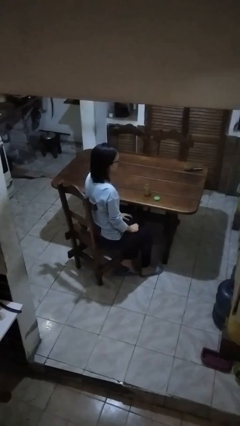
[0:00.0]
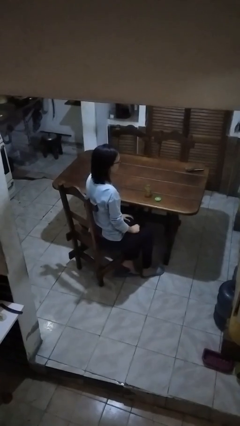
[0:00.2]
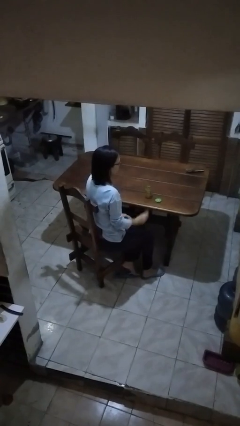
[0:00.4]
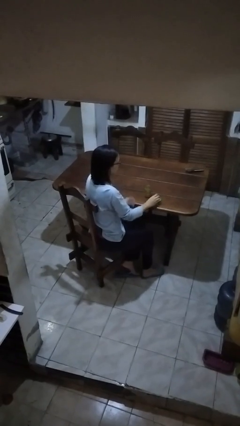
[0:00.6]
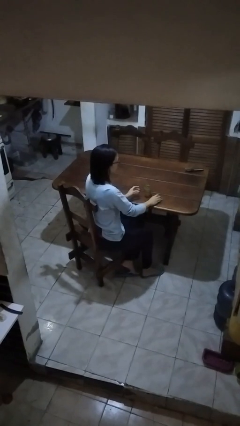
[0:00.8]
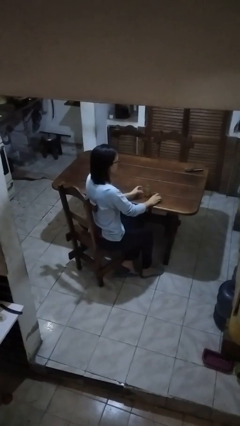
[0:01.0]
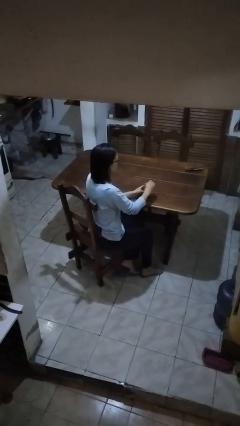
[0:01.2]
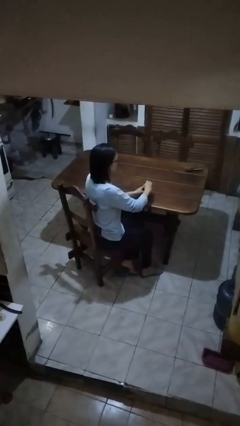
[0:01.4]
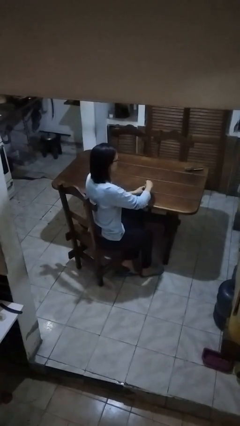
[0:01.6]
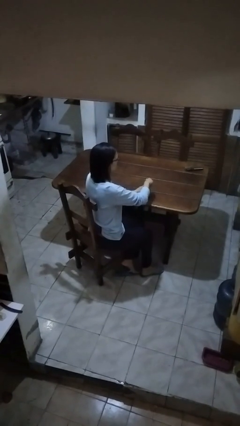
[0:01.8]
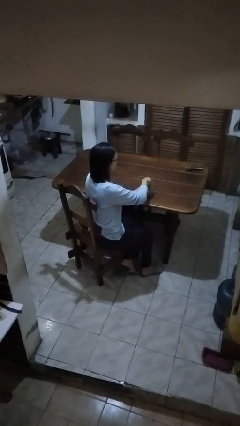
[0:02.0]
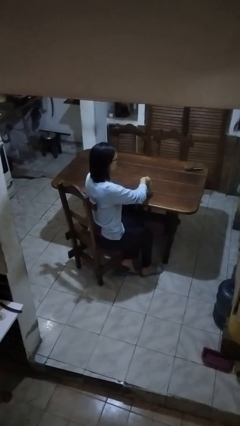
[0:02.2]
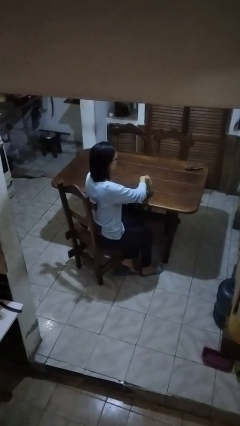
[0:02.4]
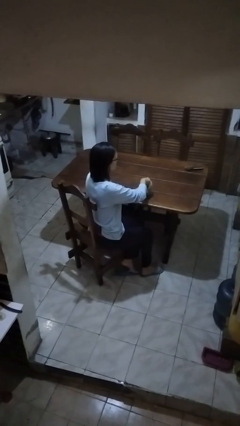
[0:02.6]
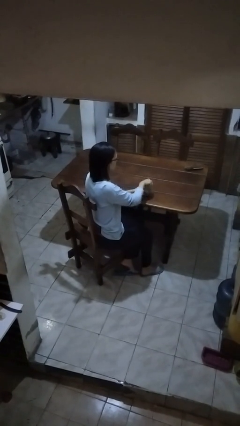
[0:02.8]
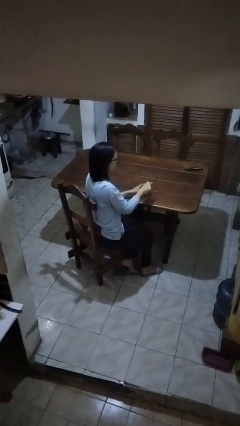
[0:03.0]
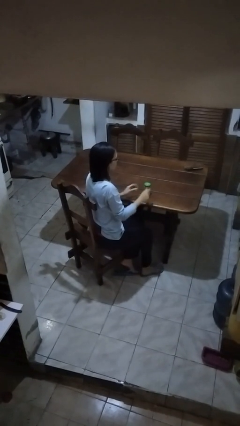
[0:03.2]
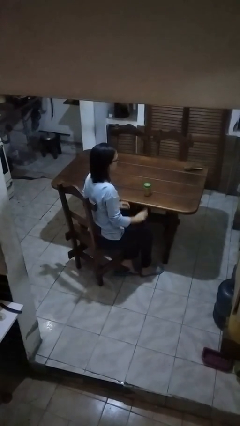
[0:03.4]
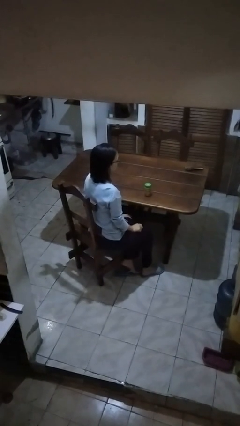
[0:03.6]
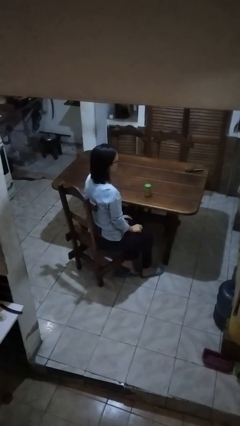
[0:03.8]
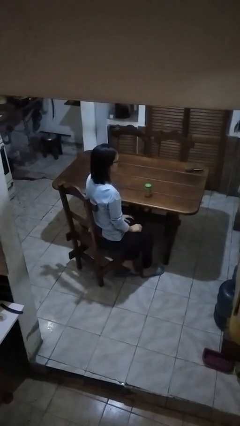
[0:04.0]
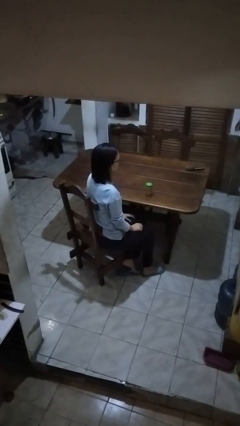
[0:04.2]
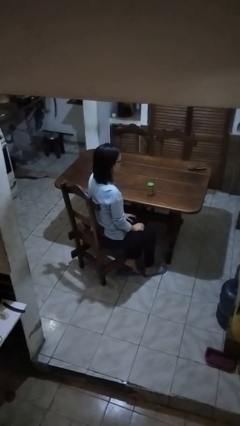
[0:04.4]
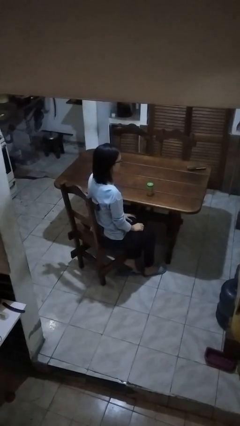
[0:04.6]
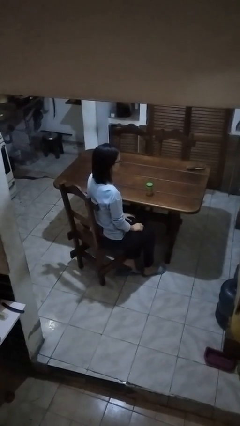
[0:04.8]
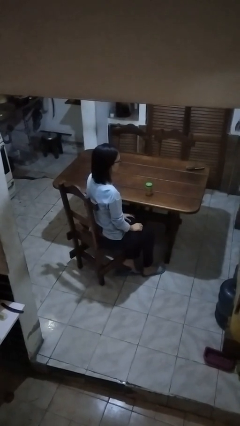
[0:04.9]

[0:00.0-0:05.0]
person closes jar

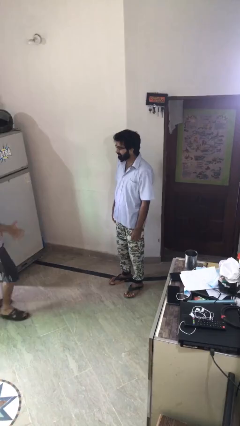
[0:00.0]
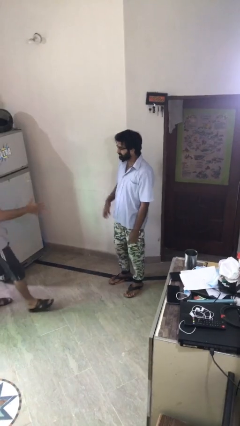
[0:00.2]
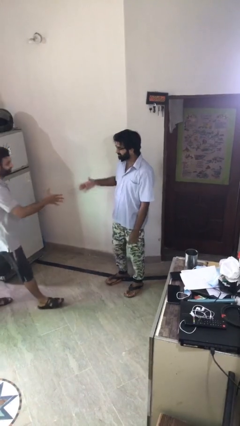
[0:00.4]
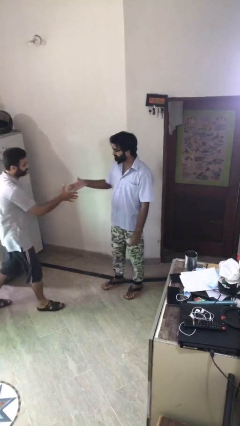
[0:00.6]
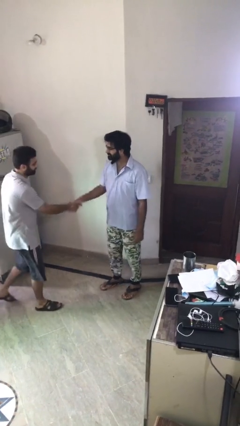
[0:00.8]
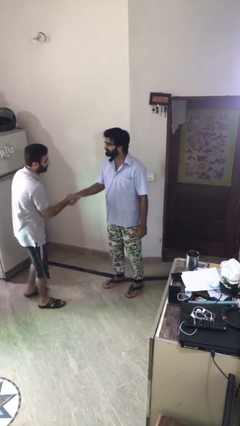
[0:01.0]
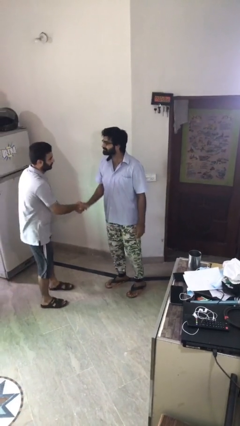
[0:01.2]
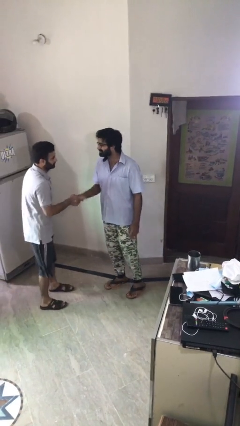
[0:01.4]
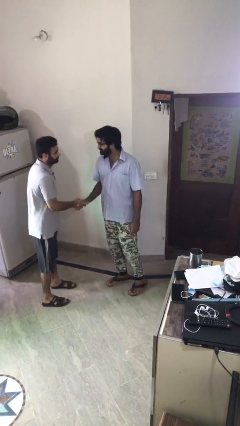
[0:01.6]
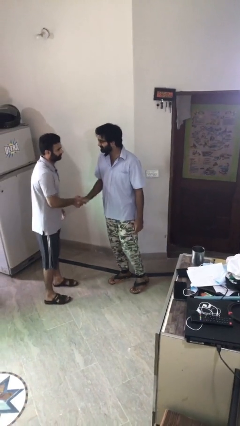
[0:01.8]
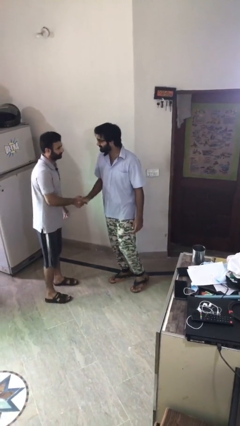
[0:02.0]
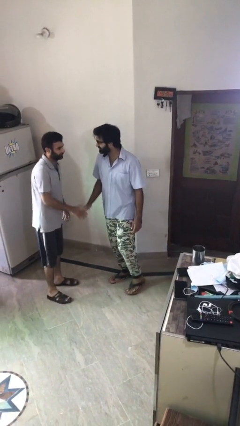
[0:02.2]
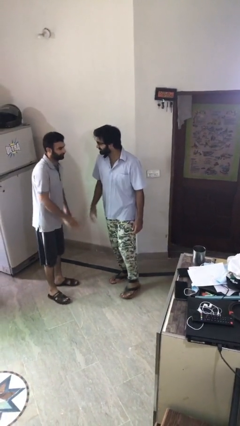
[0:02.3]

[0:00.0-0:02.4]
person shakes hand

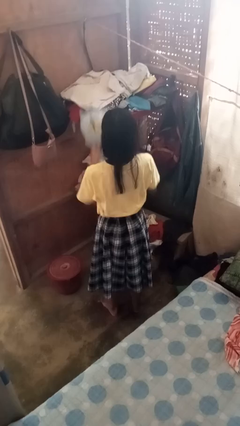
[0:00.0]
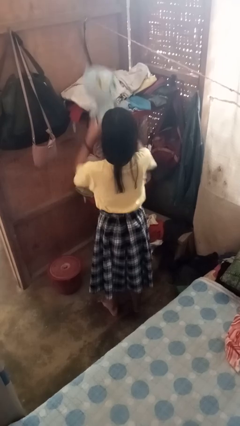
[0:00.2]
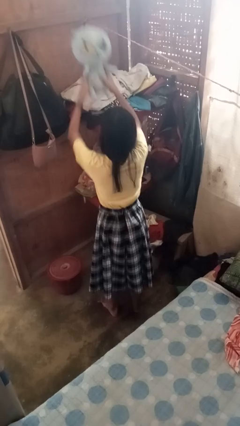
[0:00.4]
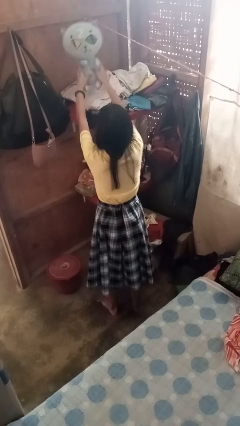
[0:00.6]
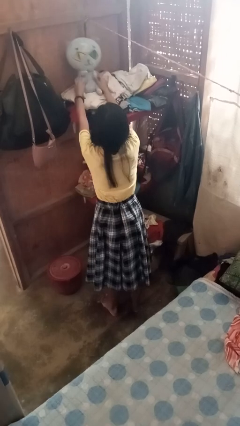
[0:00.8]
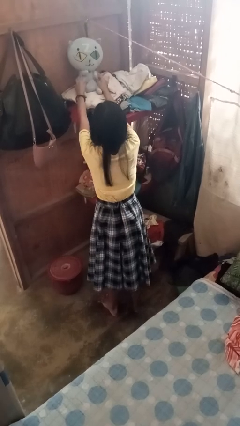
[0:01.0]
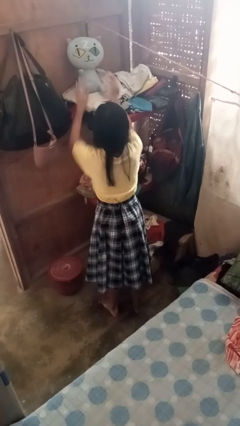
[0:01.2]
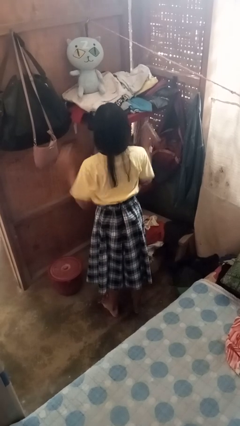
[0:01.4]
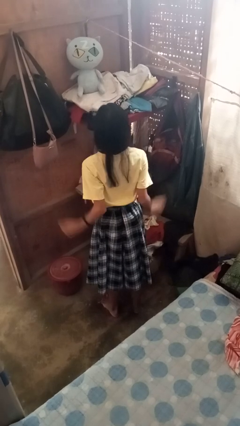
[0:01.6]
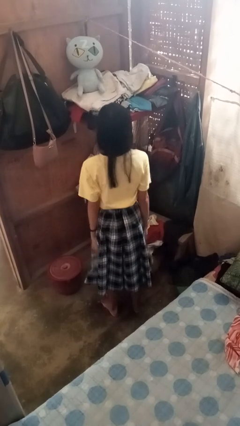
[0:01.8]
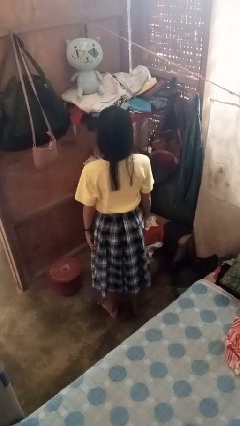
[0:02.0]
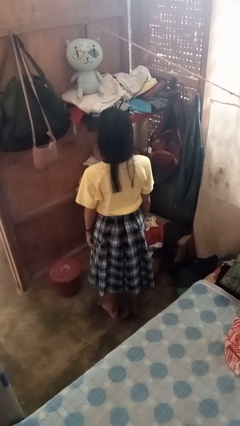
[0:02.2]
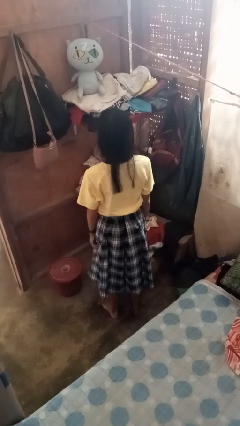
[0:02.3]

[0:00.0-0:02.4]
person puts down object on shelf

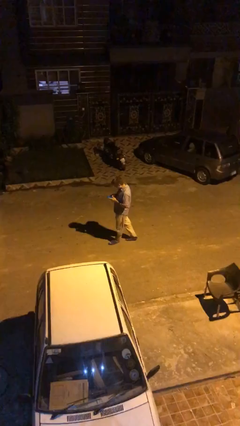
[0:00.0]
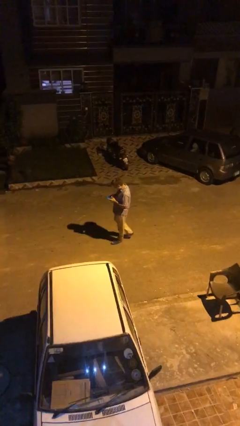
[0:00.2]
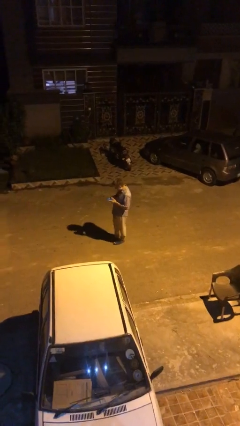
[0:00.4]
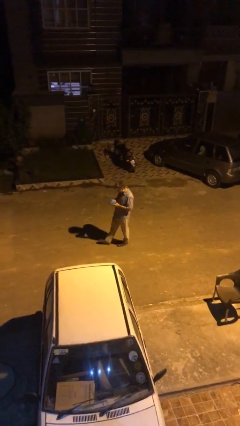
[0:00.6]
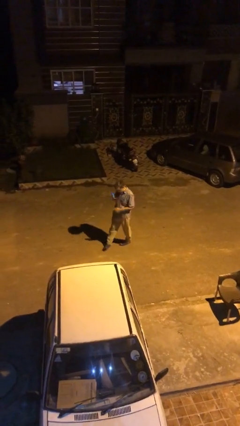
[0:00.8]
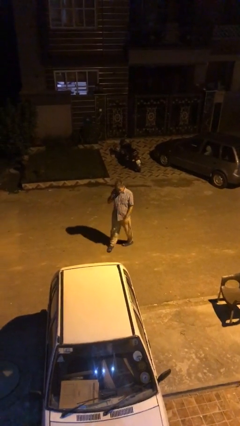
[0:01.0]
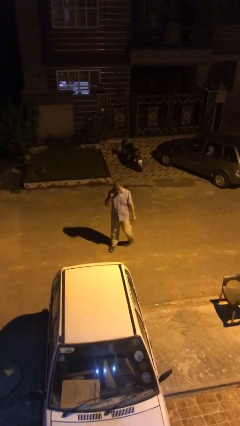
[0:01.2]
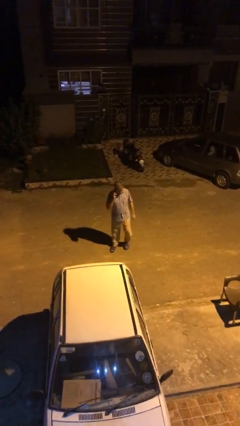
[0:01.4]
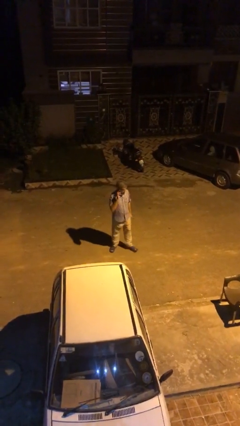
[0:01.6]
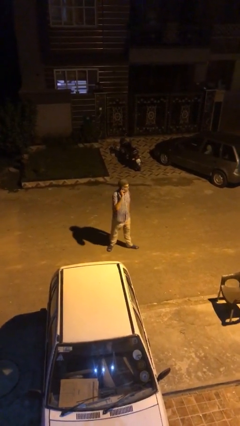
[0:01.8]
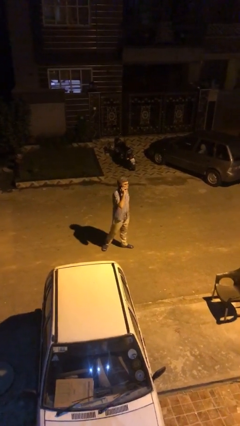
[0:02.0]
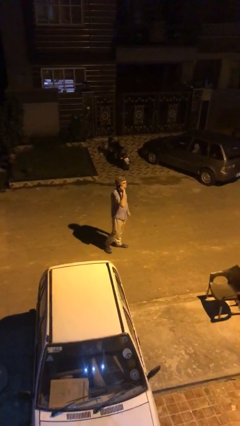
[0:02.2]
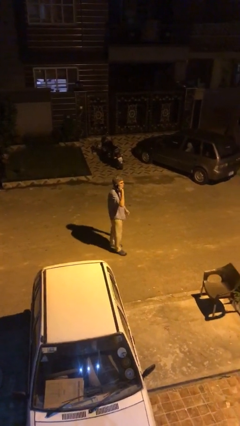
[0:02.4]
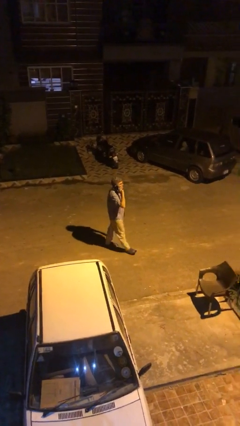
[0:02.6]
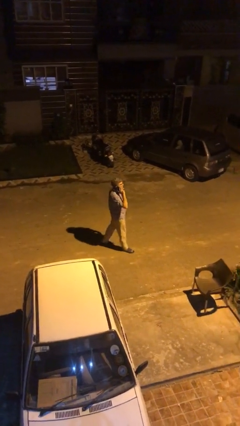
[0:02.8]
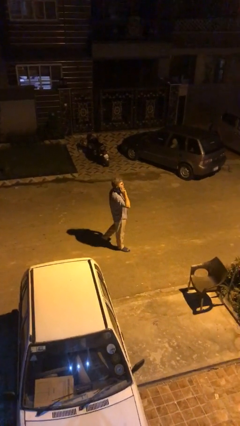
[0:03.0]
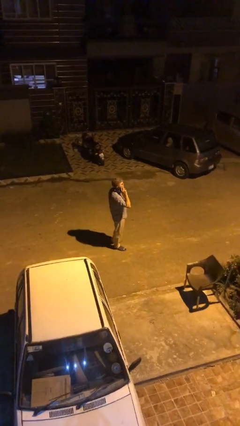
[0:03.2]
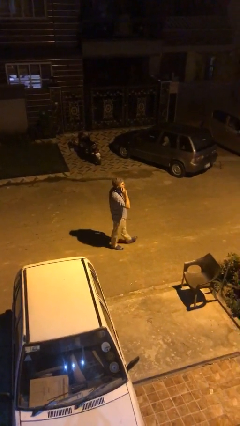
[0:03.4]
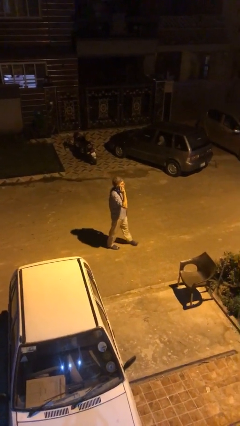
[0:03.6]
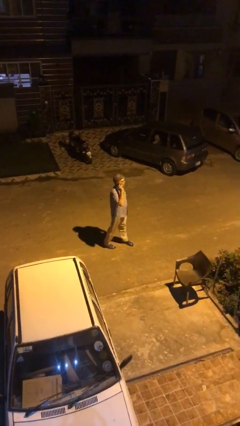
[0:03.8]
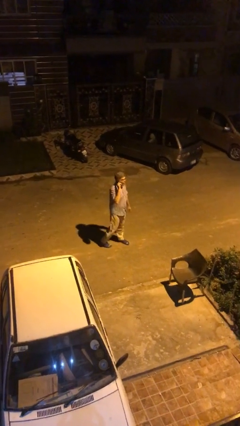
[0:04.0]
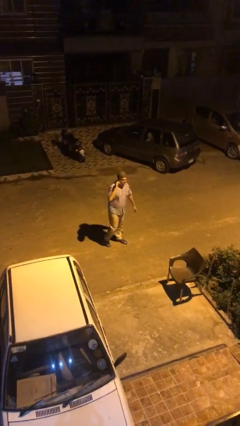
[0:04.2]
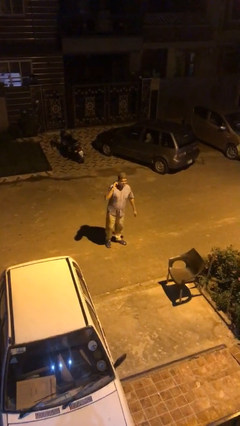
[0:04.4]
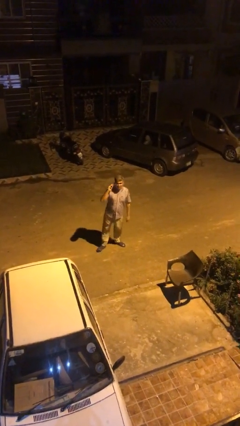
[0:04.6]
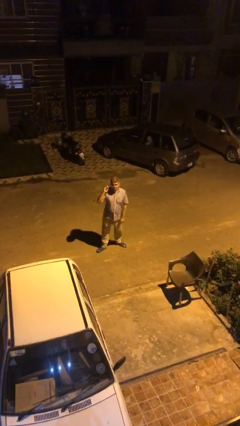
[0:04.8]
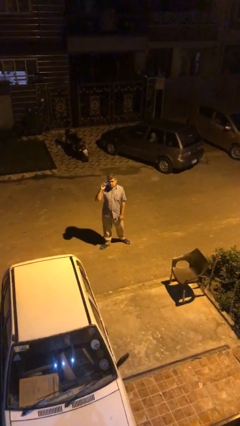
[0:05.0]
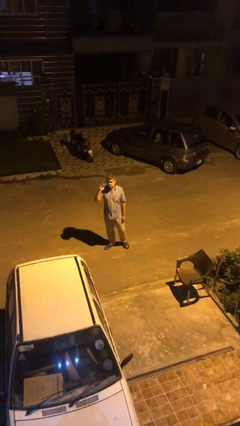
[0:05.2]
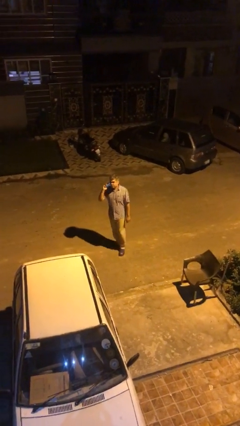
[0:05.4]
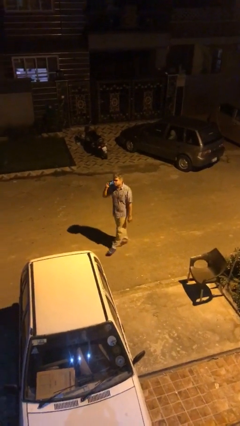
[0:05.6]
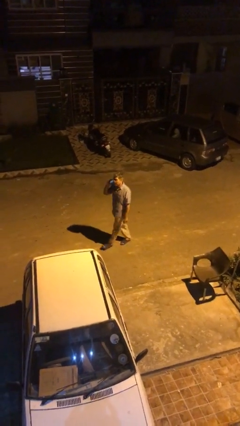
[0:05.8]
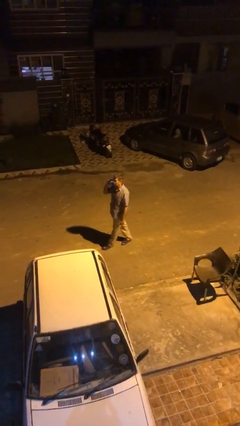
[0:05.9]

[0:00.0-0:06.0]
person talks on phone

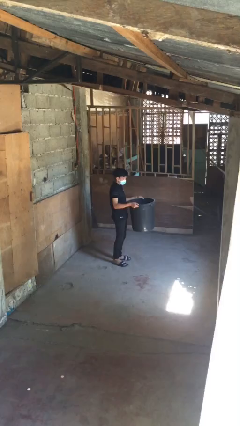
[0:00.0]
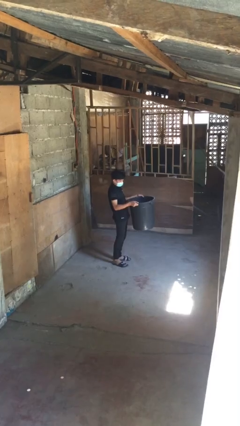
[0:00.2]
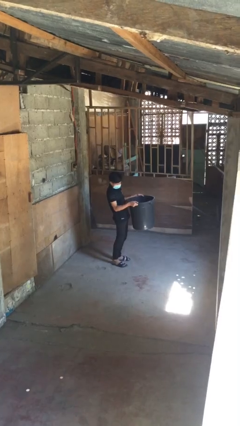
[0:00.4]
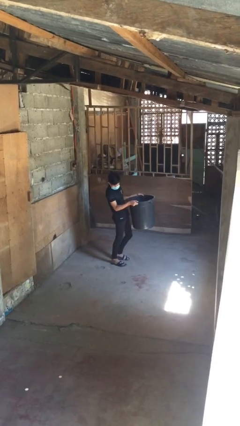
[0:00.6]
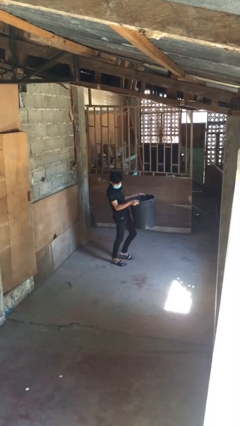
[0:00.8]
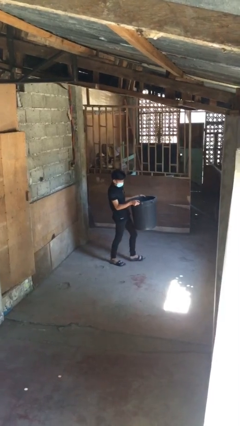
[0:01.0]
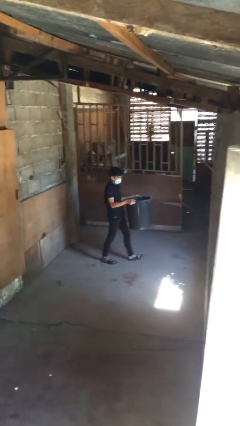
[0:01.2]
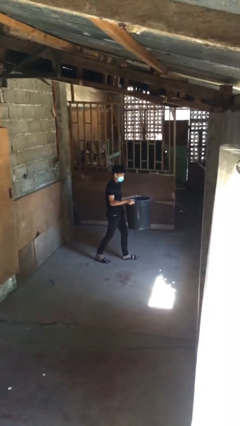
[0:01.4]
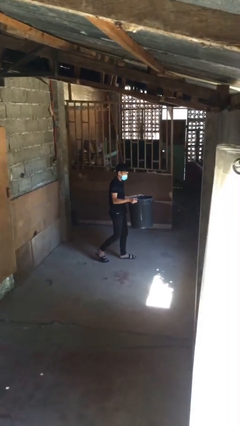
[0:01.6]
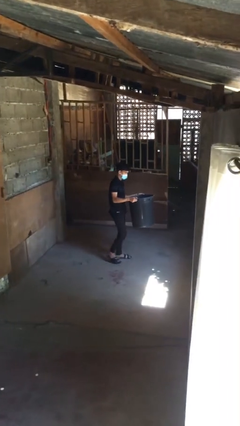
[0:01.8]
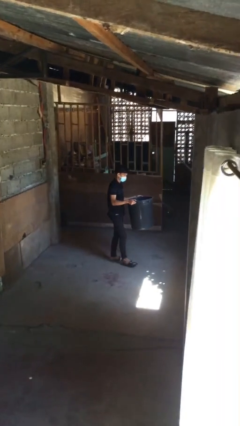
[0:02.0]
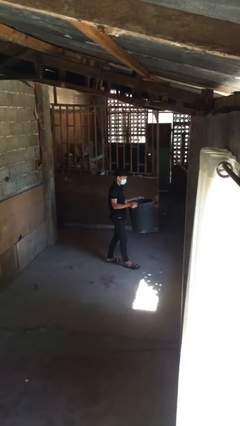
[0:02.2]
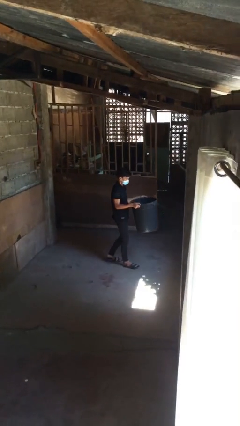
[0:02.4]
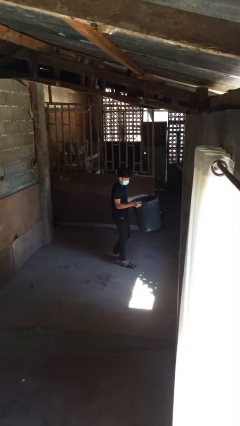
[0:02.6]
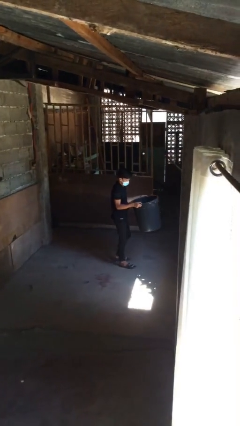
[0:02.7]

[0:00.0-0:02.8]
person carries heavy object
